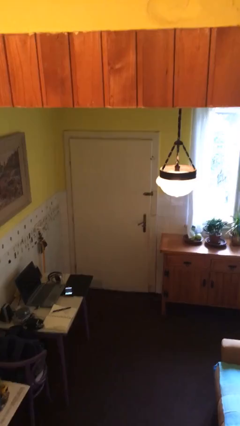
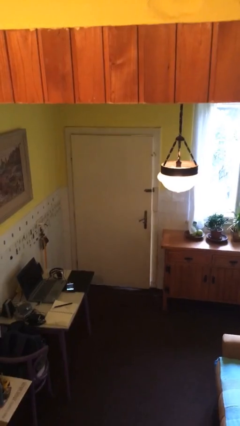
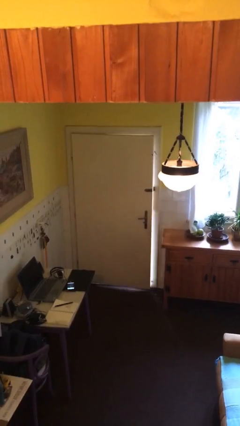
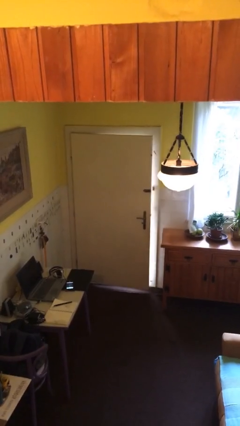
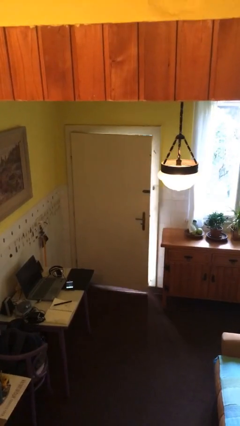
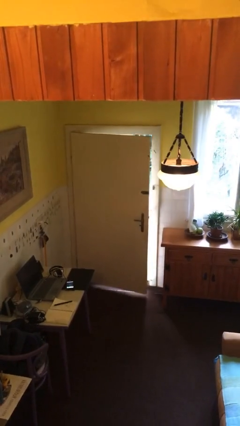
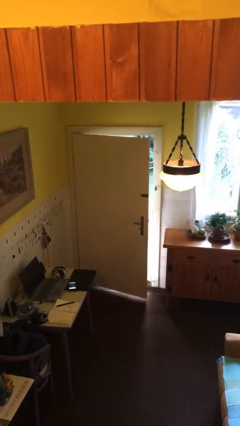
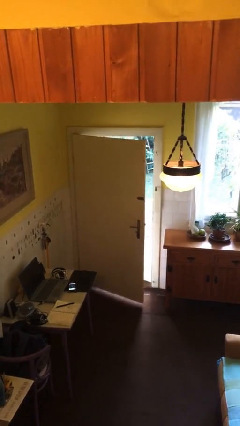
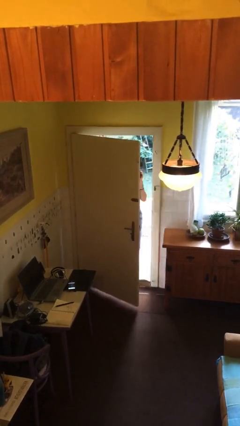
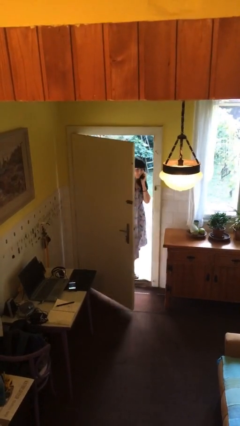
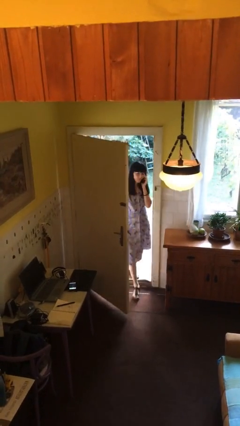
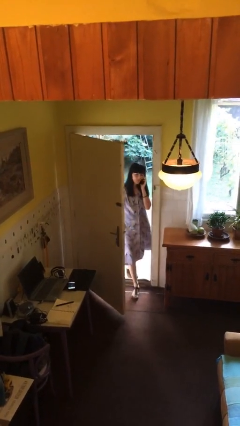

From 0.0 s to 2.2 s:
person opens facility door

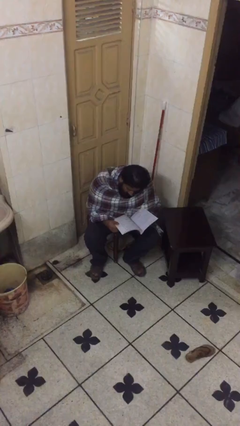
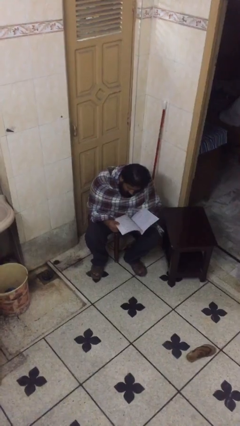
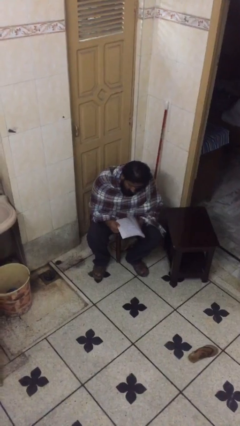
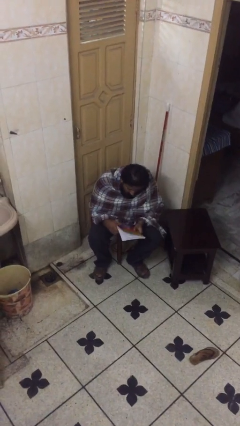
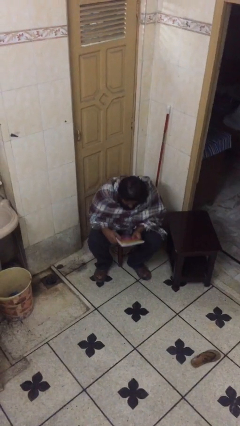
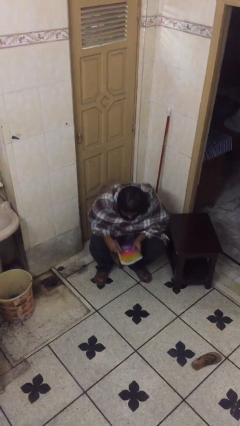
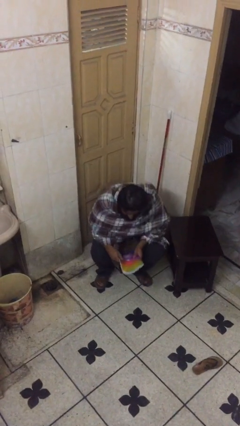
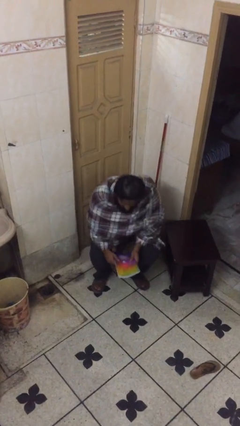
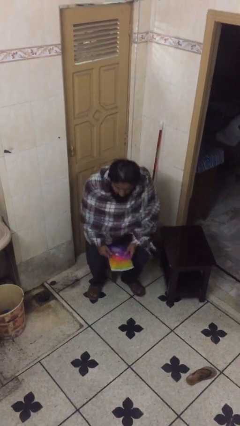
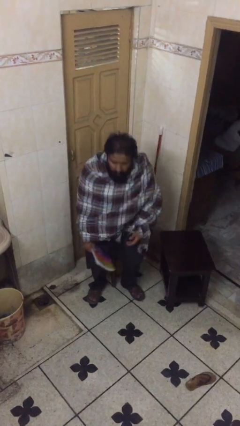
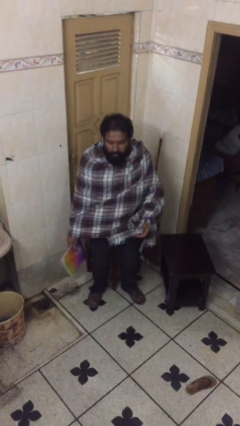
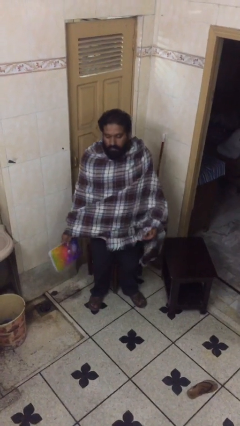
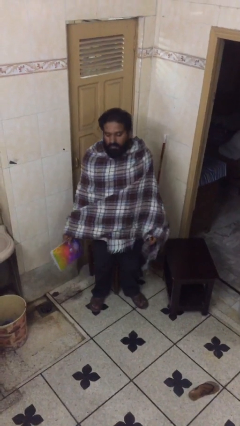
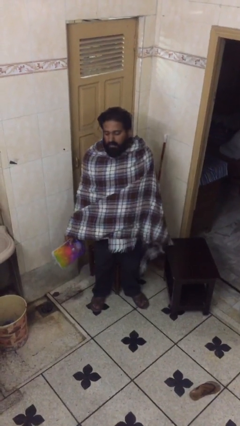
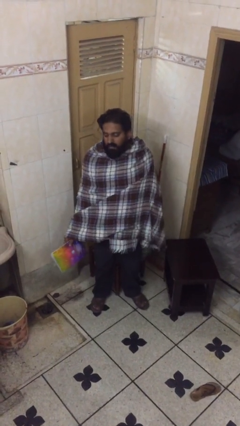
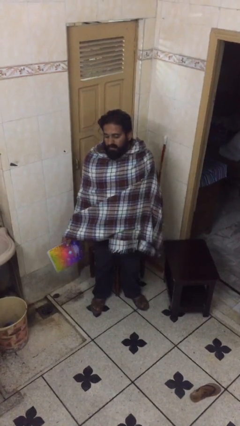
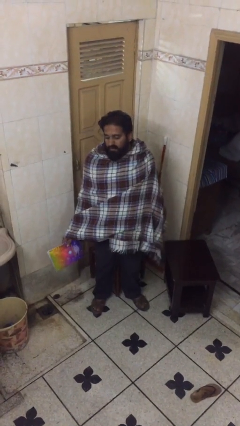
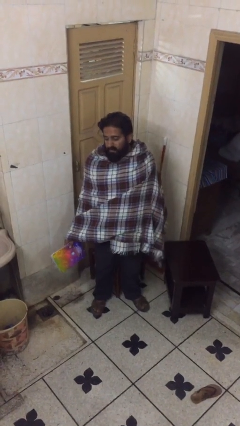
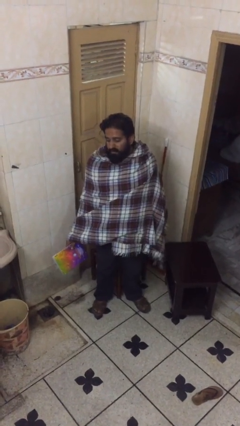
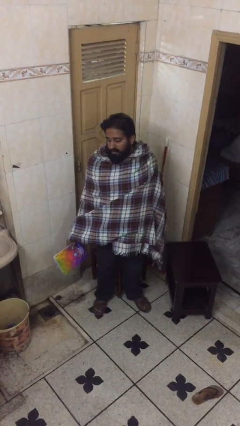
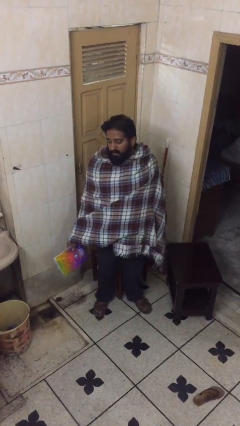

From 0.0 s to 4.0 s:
person stands up

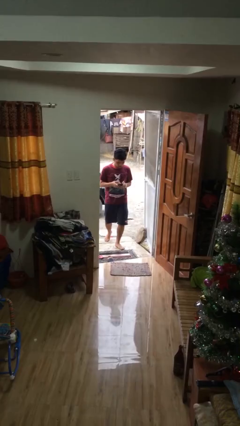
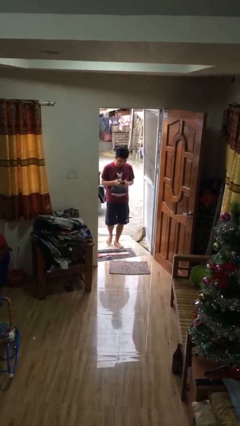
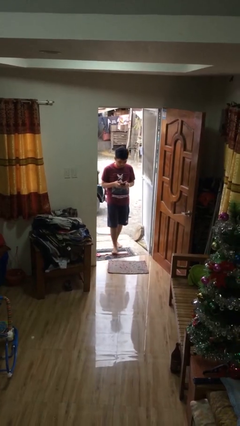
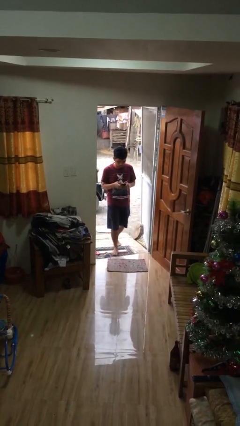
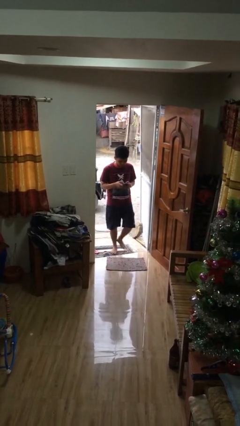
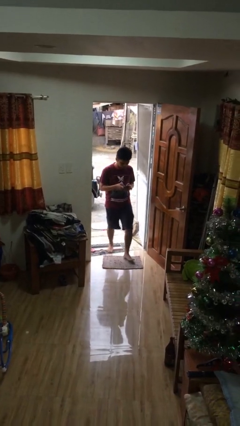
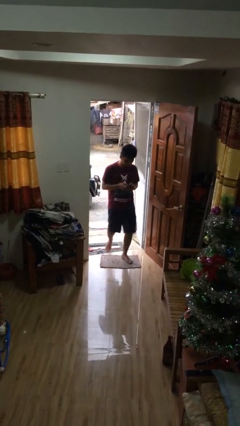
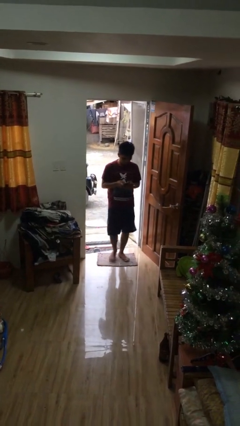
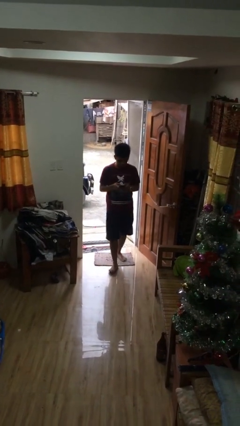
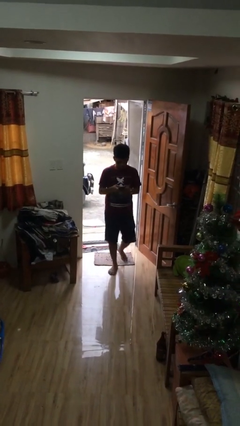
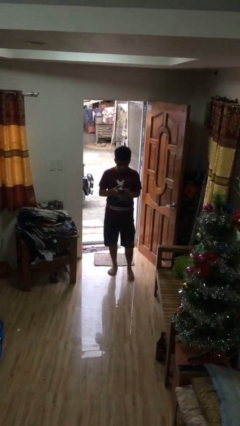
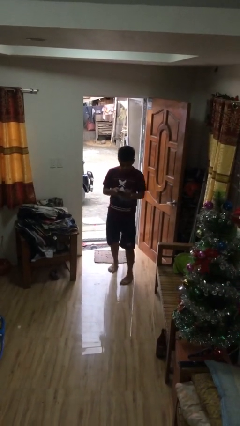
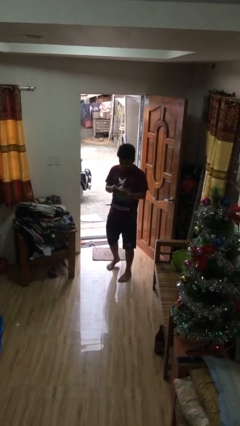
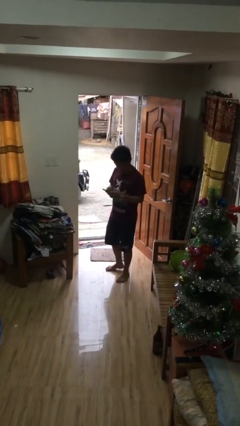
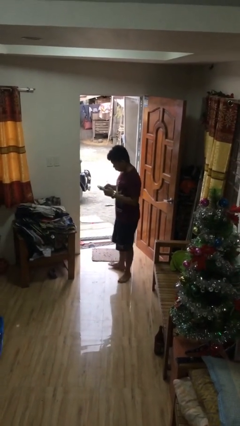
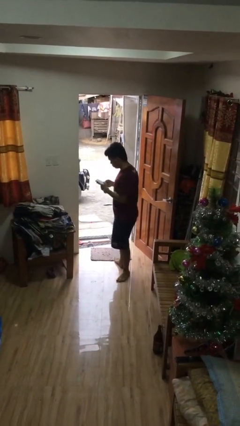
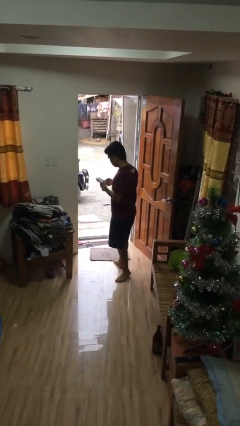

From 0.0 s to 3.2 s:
person enters scene through structure

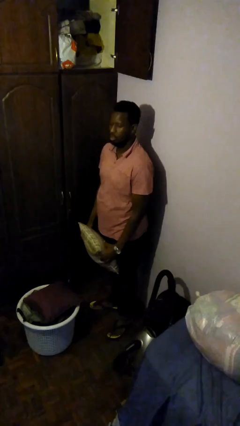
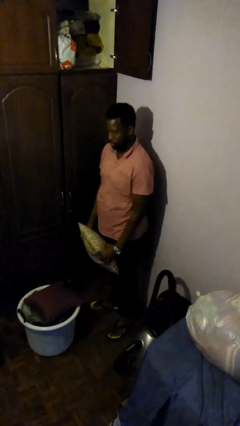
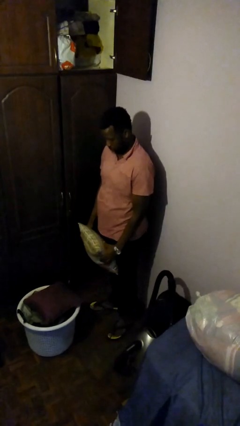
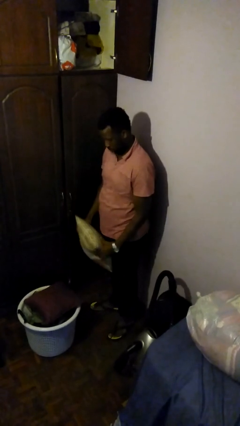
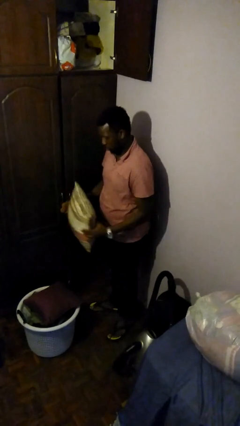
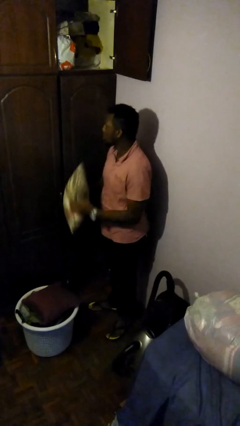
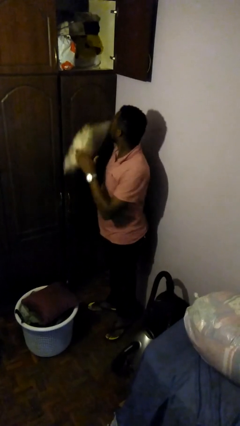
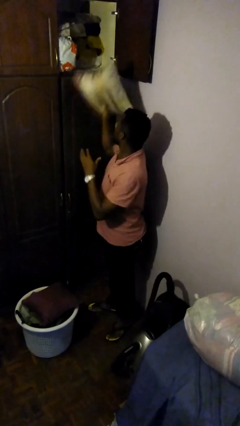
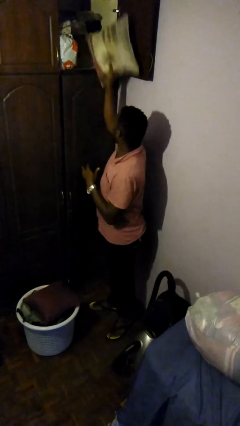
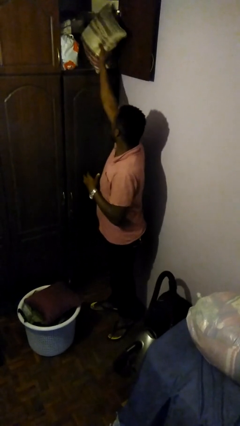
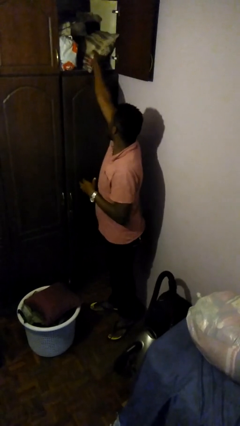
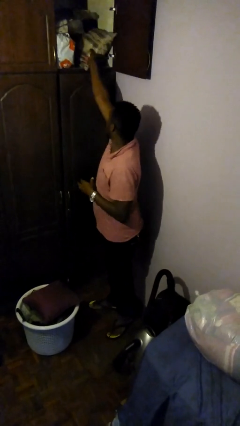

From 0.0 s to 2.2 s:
person puts down object on shelf

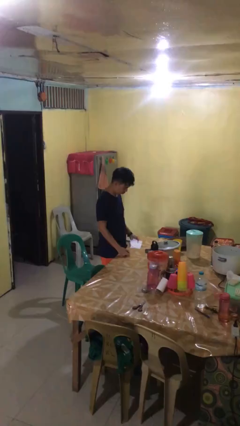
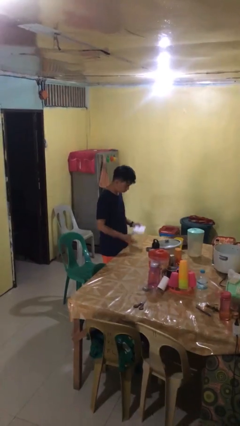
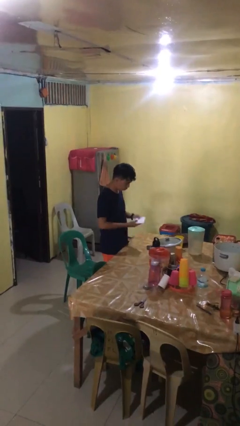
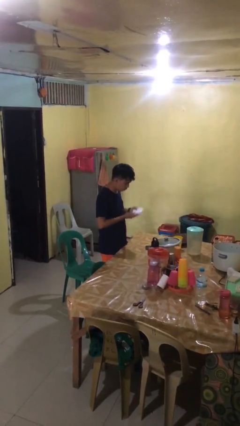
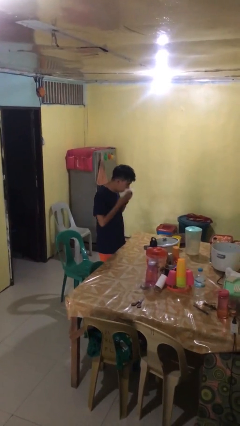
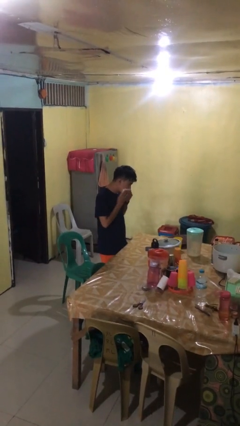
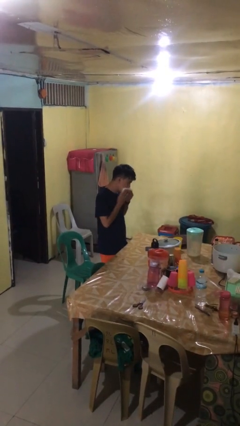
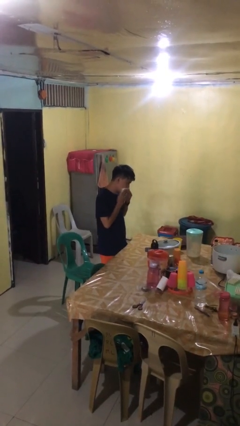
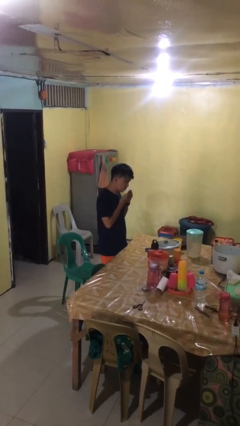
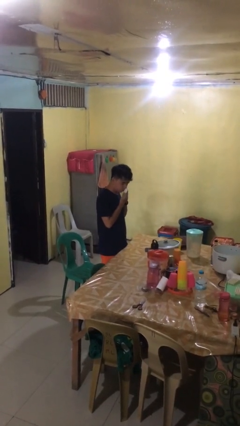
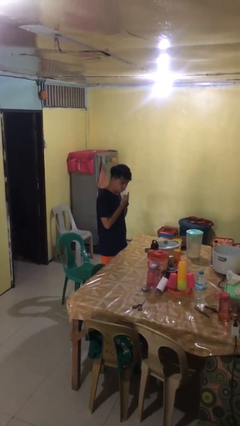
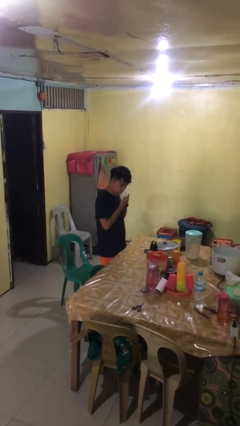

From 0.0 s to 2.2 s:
person wipes mouth with napkin

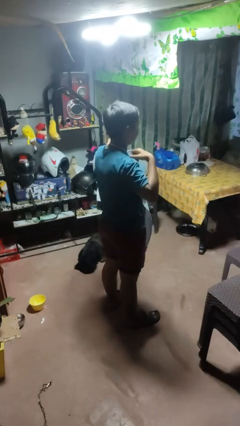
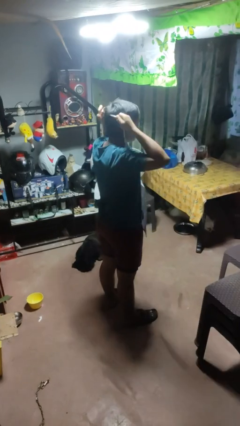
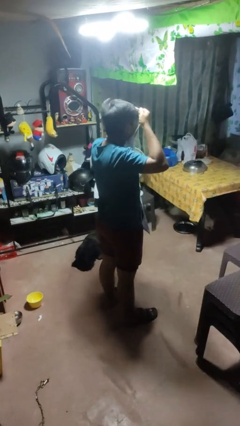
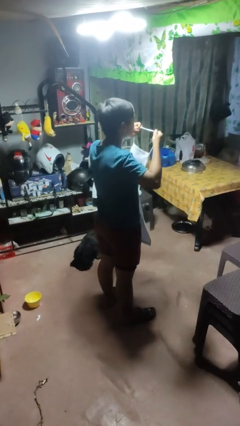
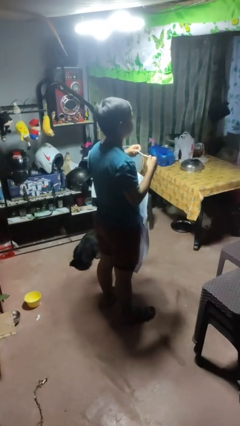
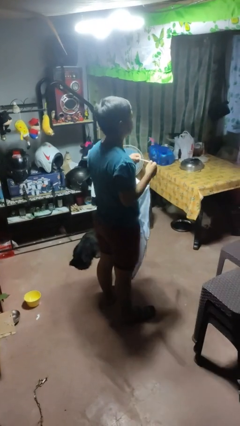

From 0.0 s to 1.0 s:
person takes off apron

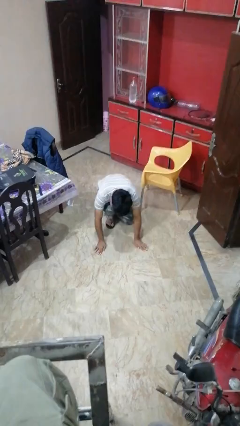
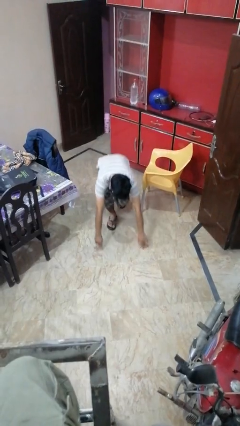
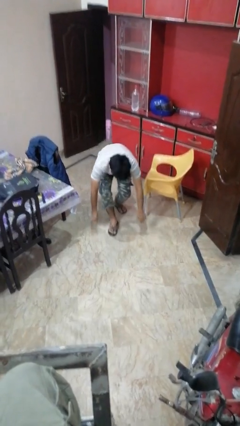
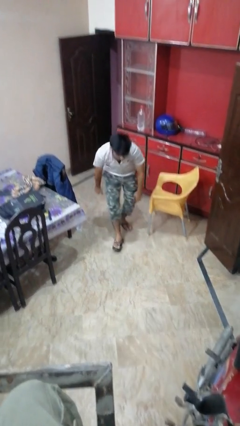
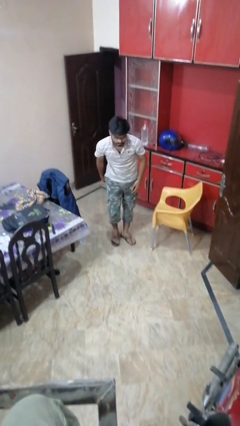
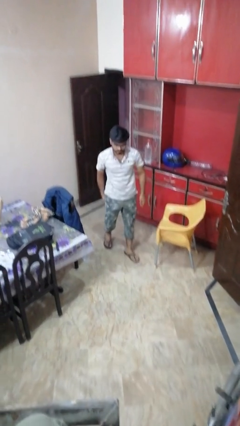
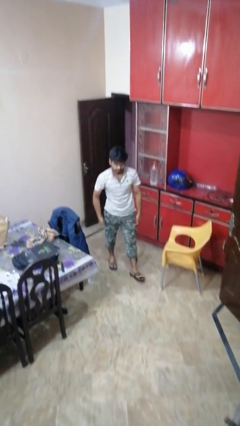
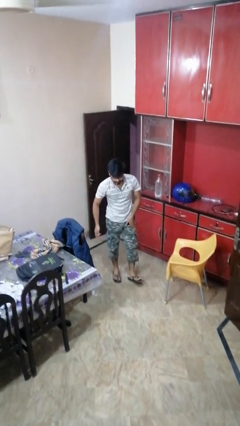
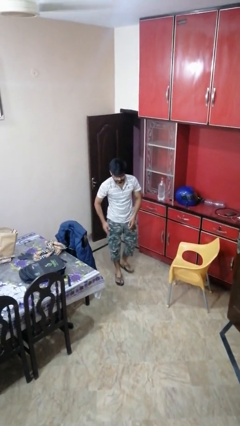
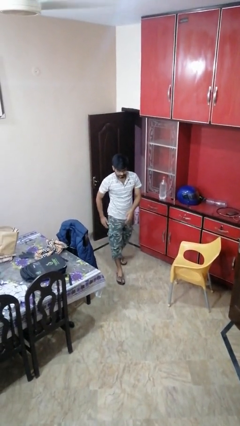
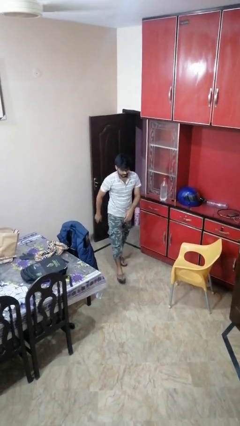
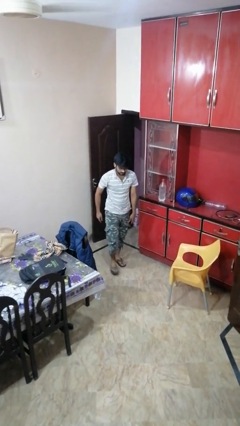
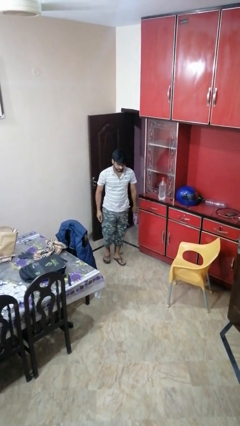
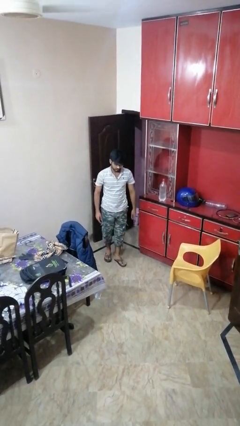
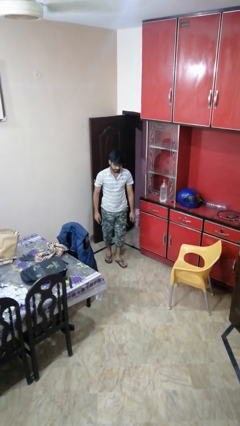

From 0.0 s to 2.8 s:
person stands up from floor
